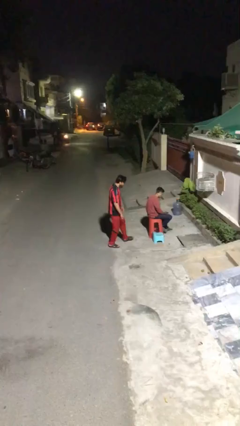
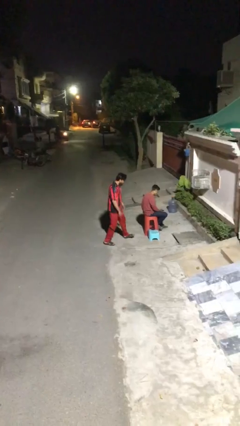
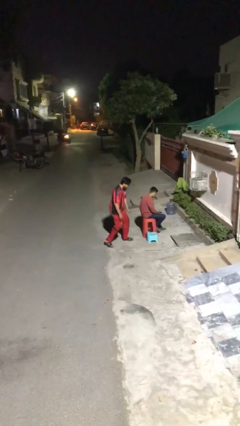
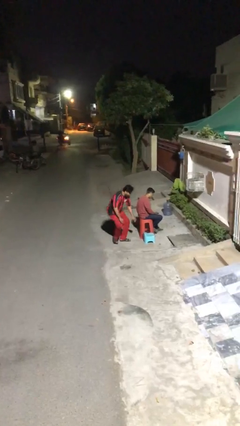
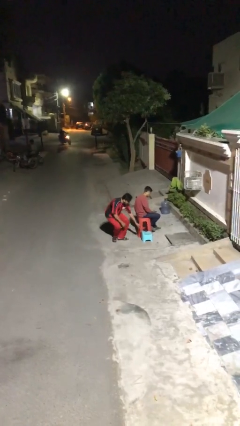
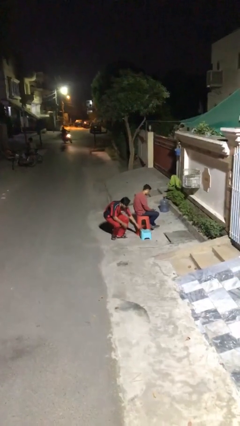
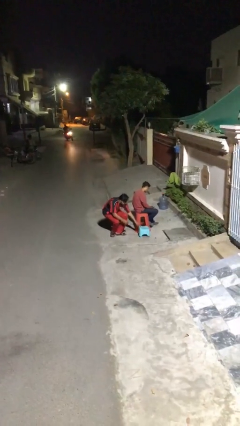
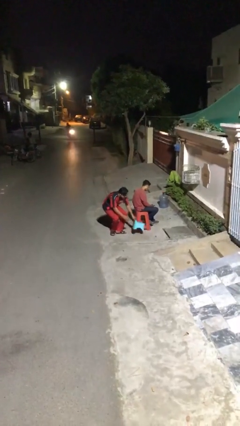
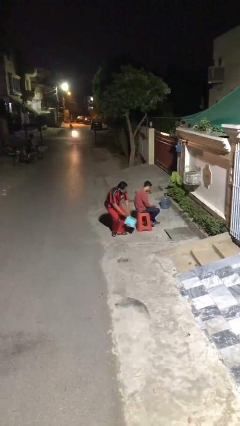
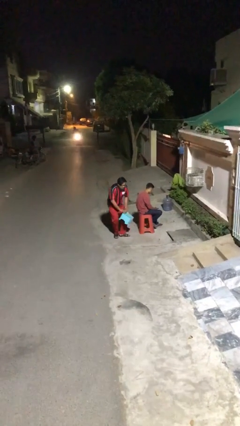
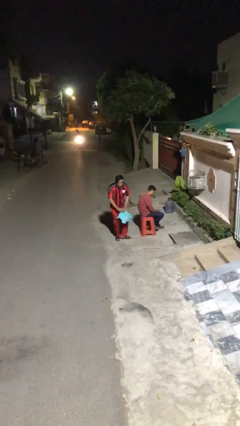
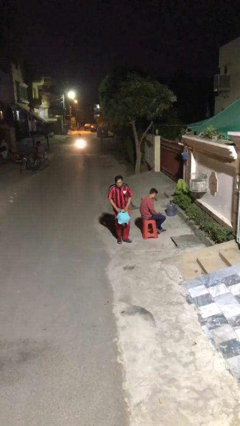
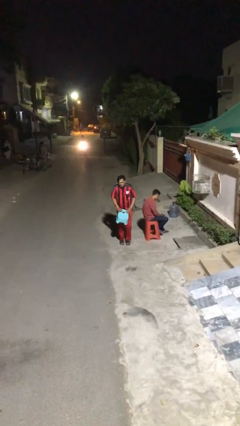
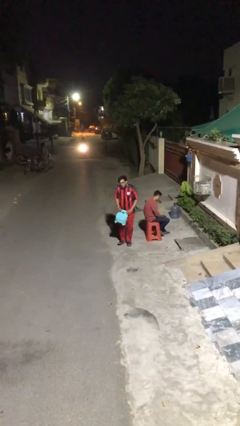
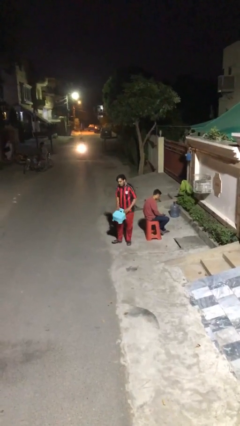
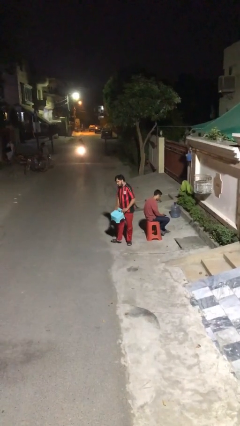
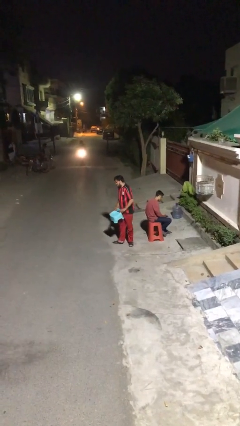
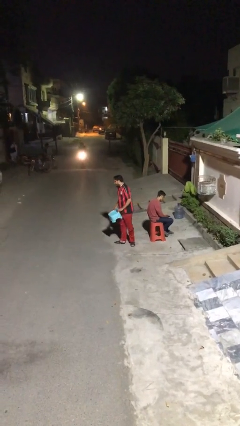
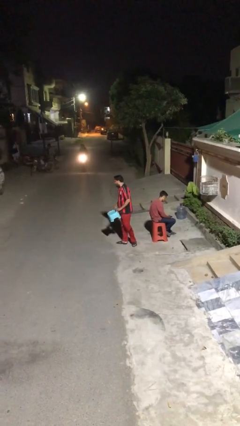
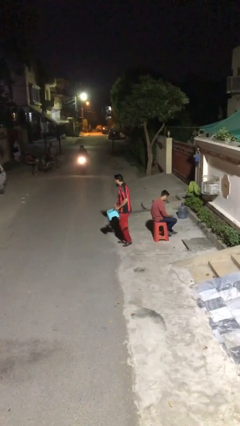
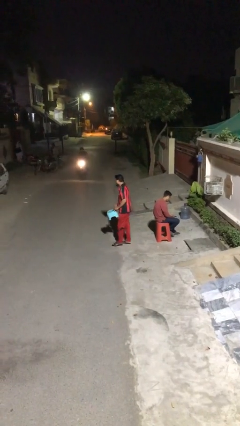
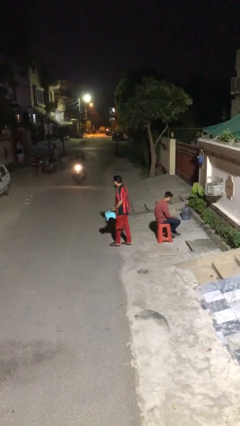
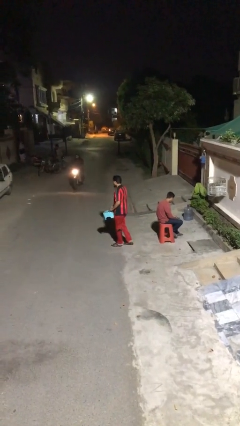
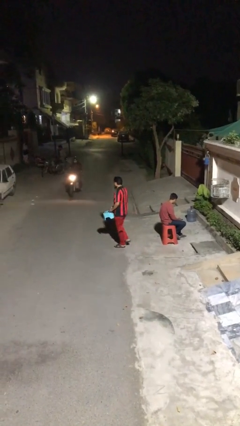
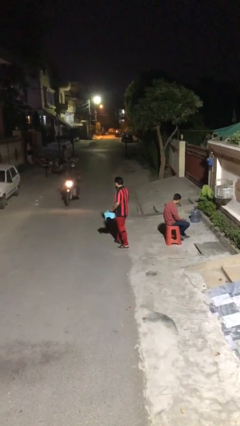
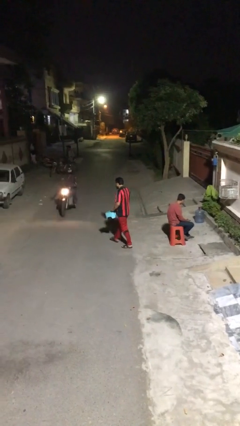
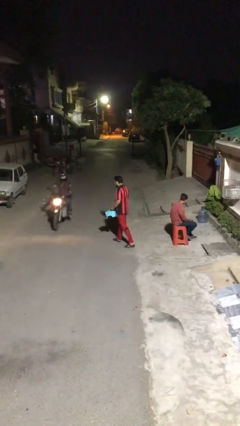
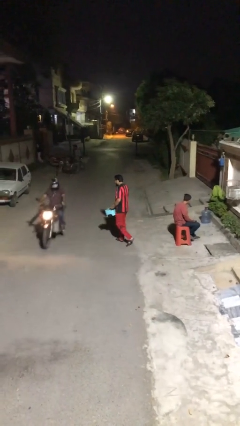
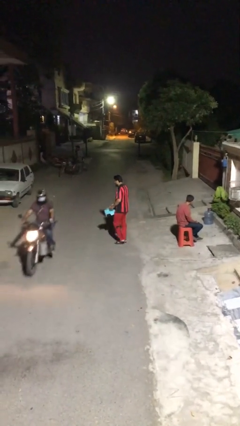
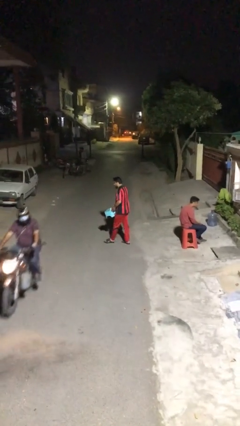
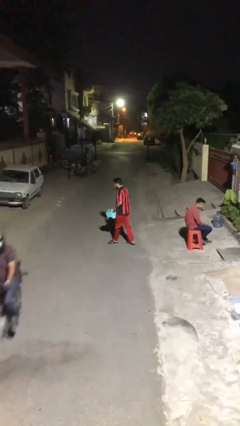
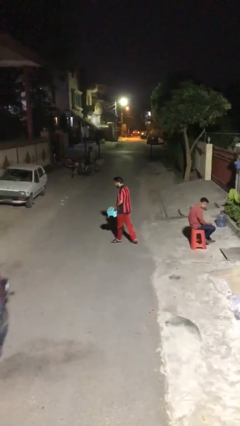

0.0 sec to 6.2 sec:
person steals object from person

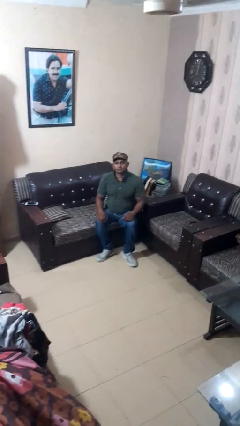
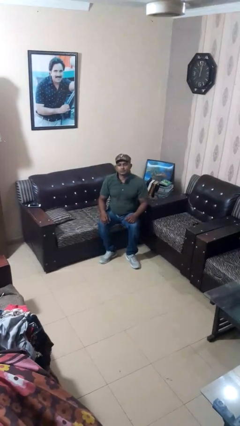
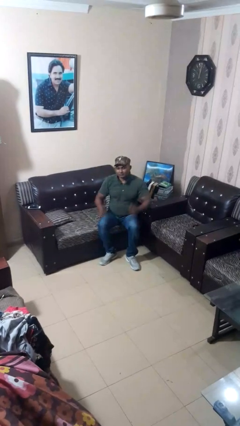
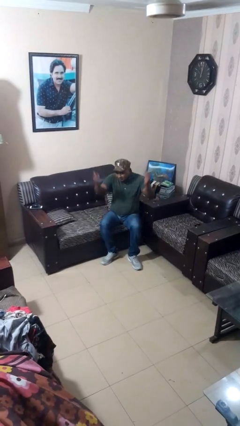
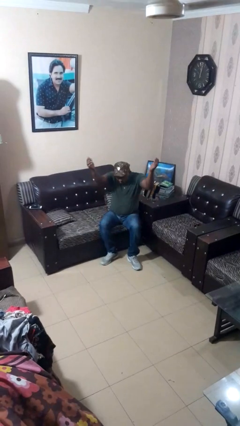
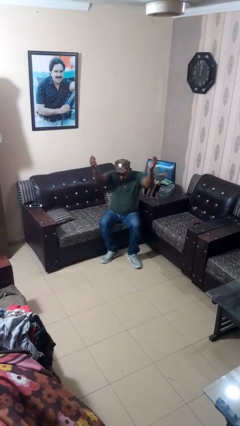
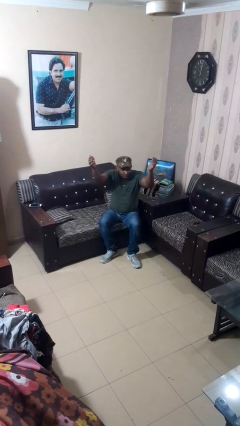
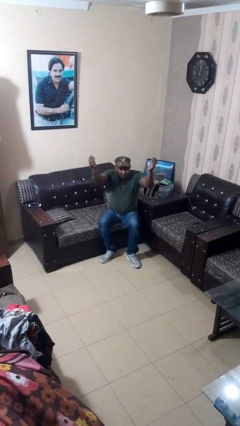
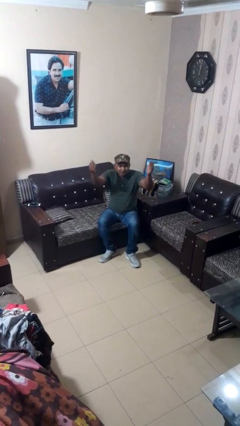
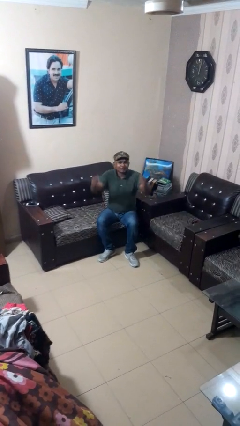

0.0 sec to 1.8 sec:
person shrugs

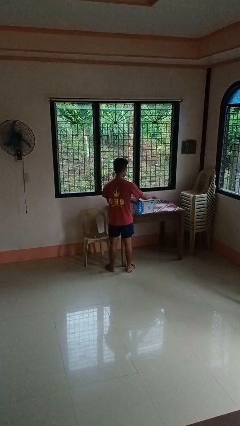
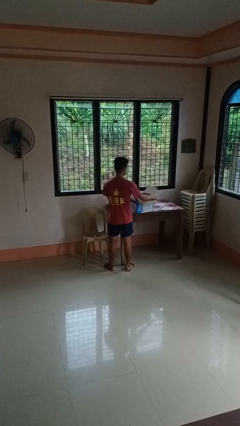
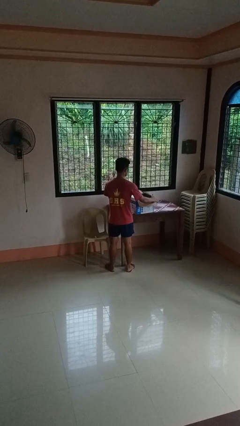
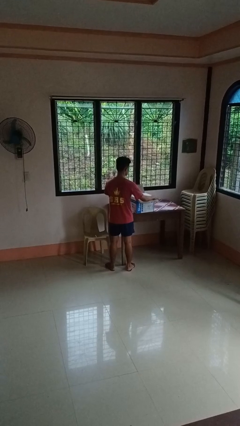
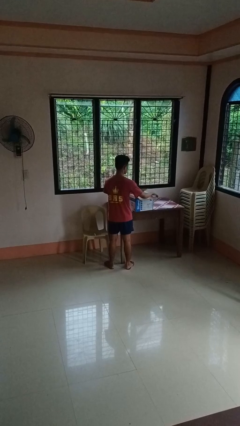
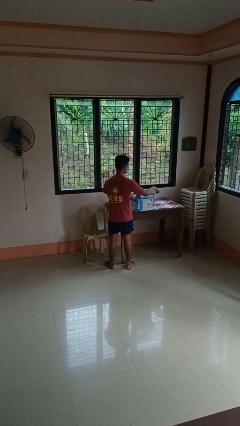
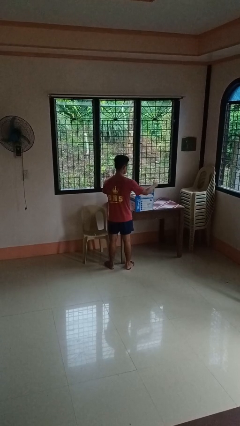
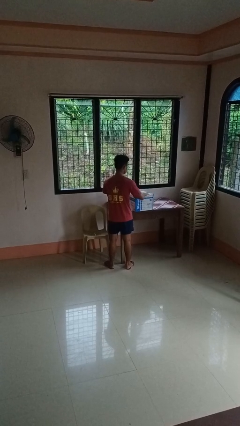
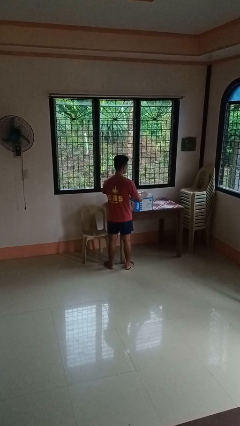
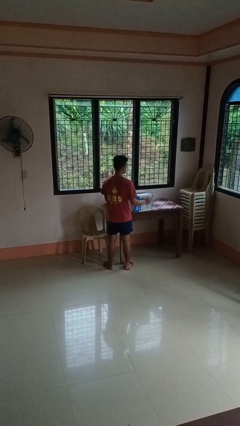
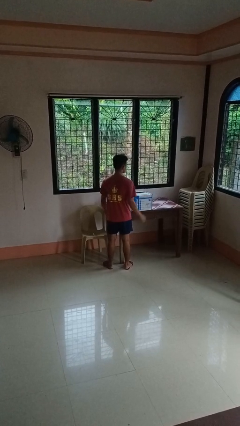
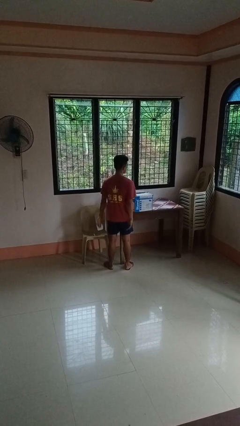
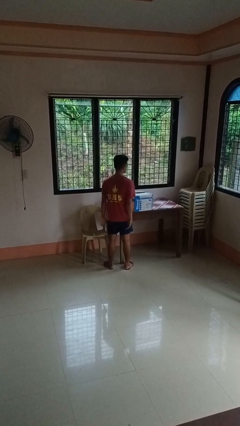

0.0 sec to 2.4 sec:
person closes box

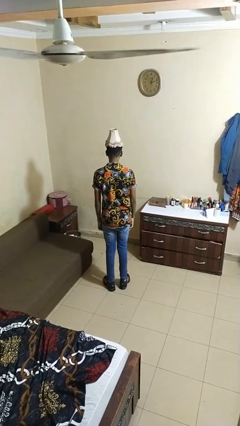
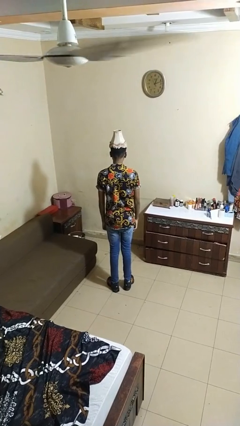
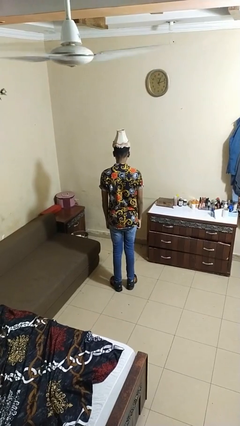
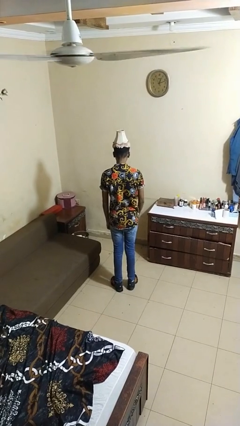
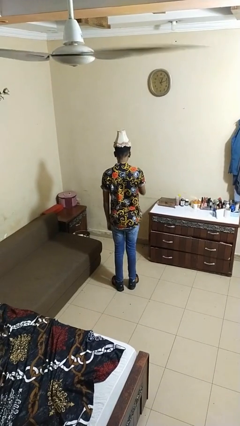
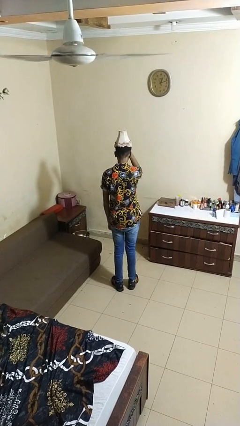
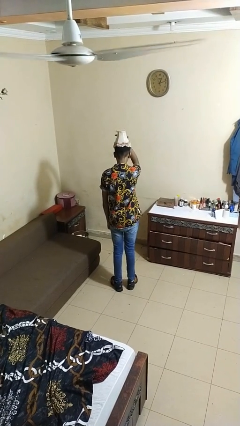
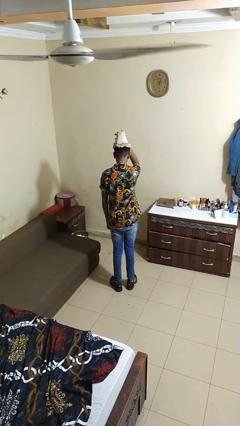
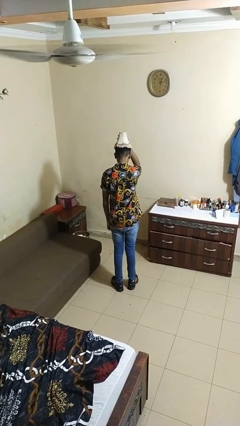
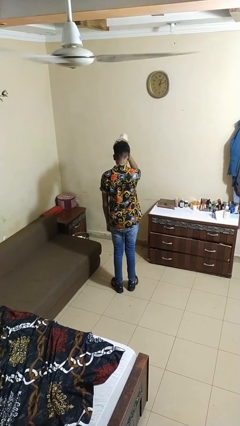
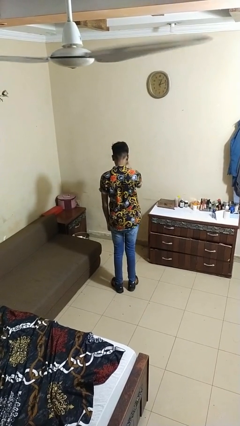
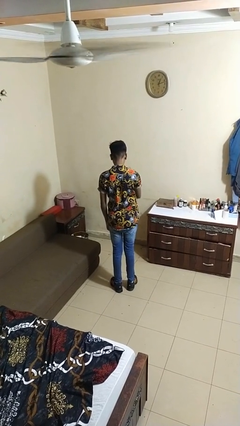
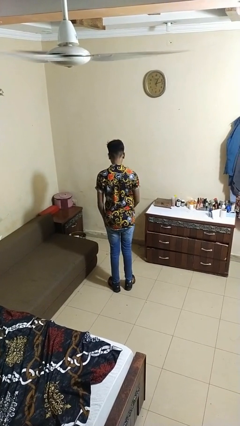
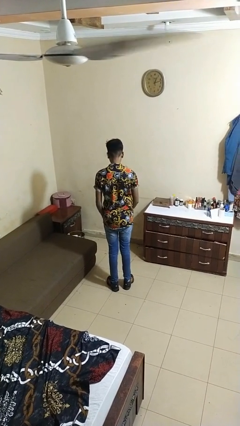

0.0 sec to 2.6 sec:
person takes off hat

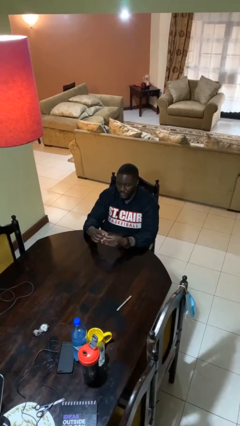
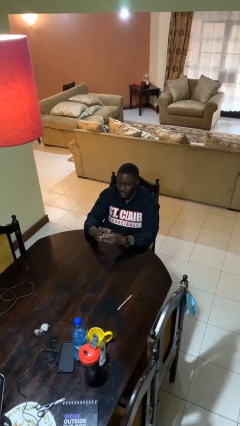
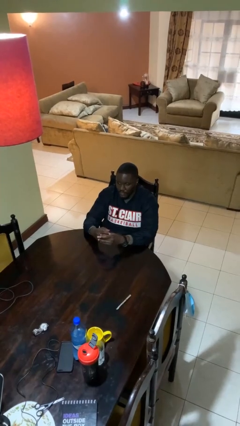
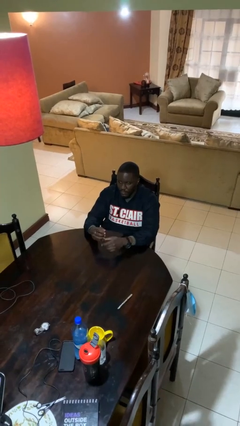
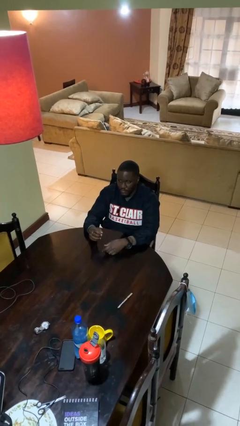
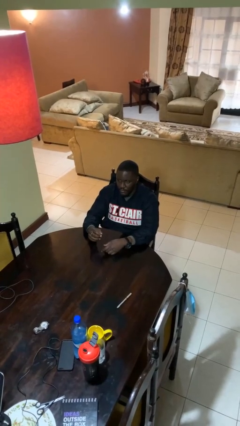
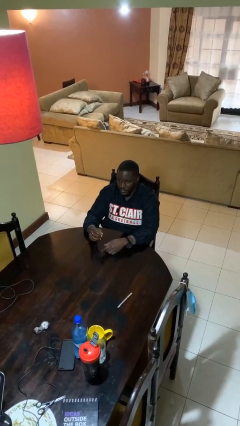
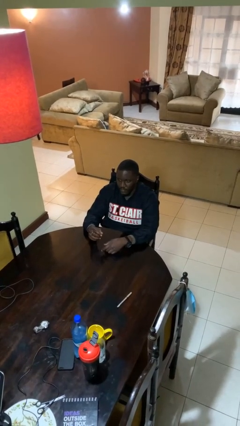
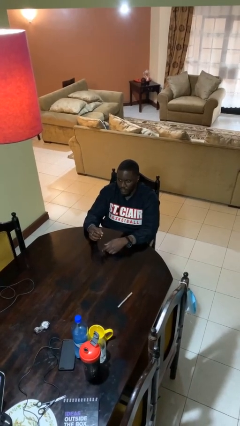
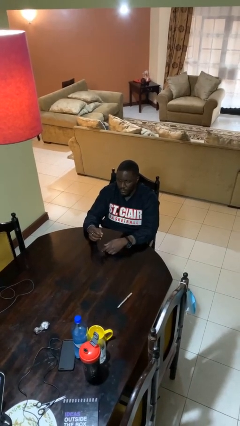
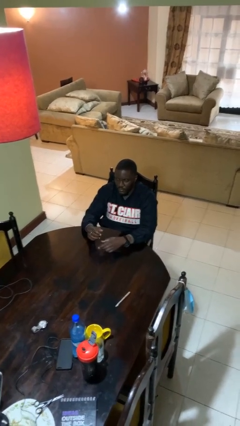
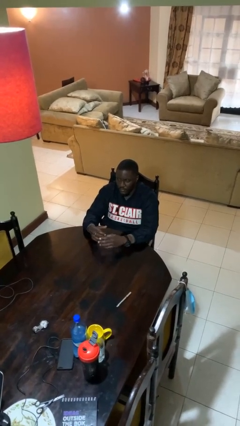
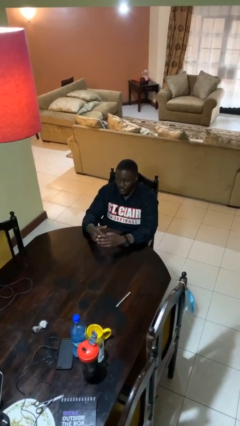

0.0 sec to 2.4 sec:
person puts on ring

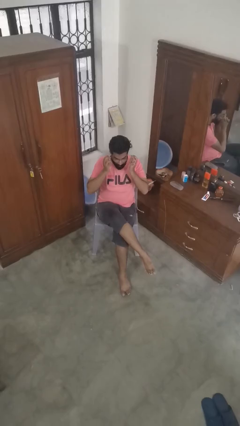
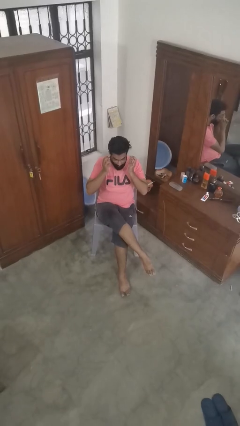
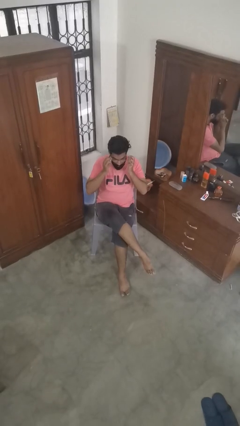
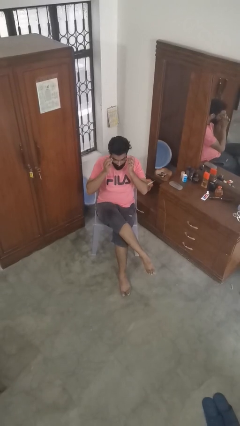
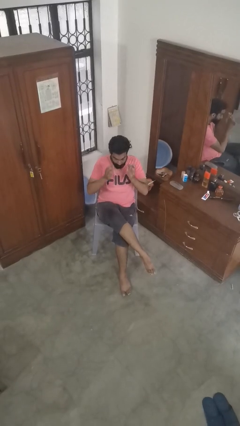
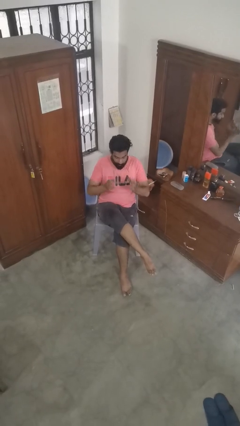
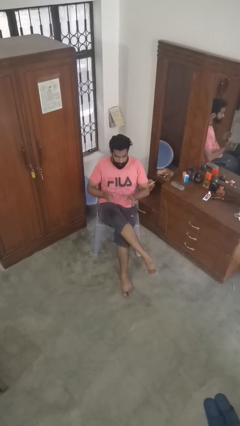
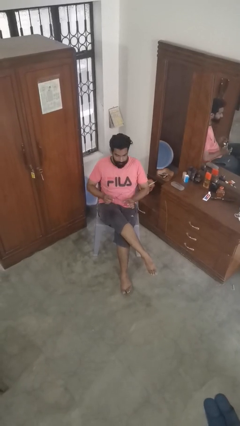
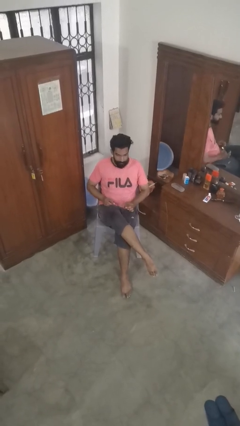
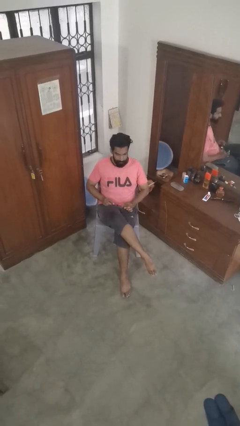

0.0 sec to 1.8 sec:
person takes off glasses
